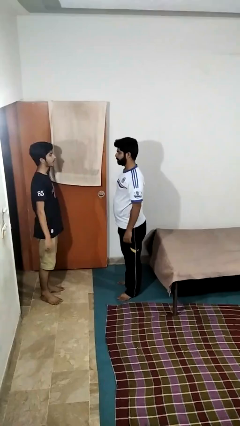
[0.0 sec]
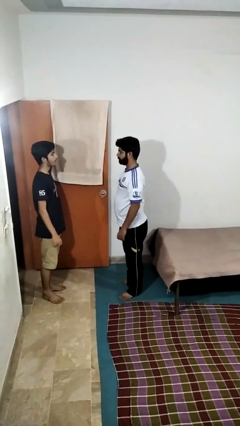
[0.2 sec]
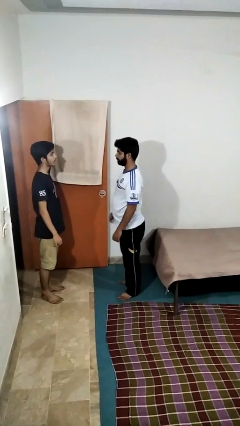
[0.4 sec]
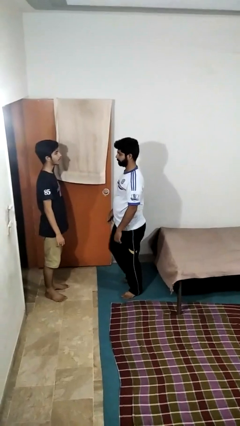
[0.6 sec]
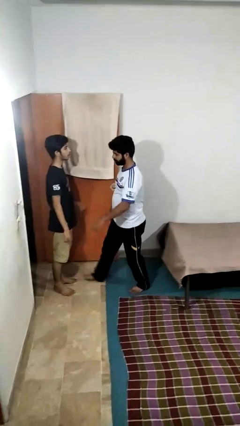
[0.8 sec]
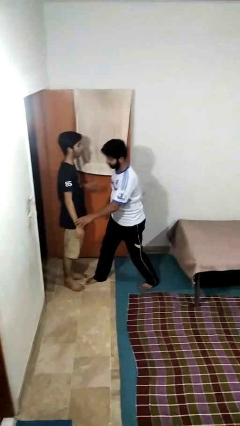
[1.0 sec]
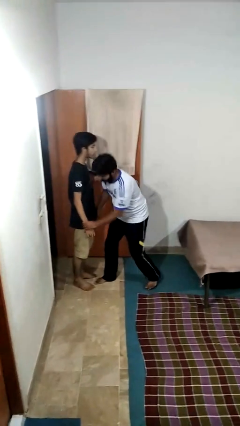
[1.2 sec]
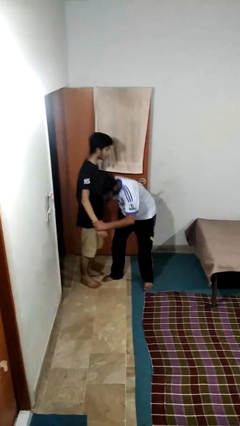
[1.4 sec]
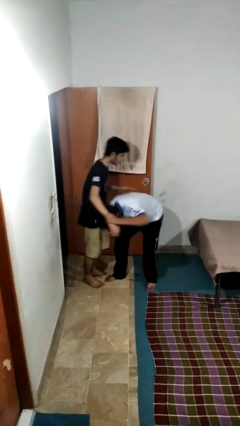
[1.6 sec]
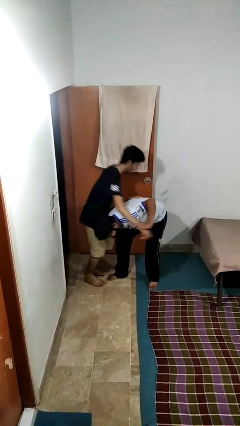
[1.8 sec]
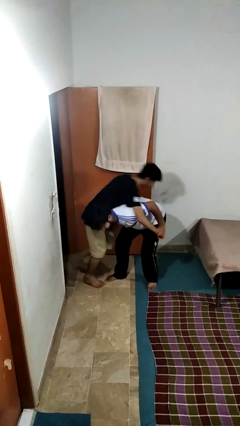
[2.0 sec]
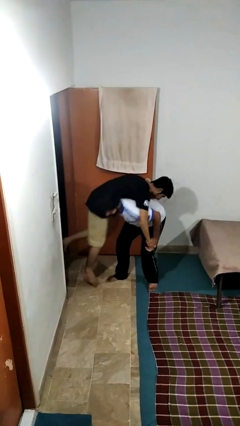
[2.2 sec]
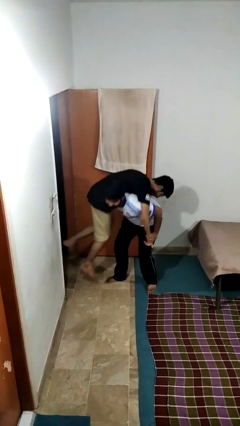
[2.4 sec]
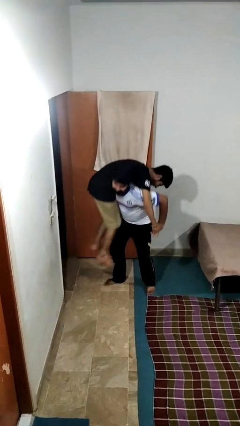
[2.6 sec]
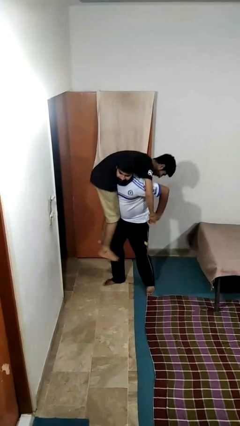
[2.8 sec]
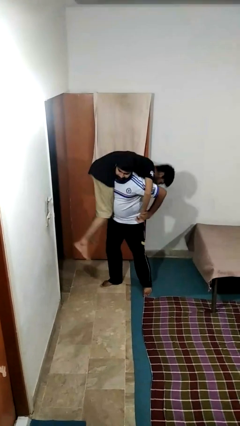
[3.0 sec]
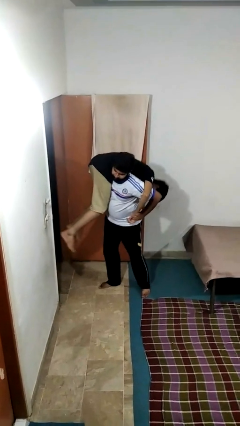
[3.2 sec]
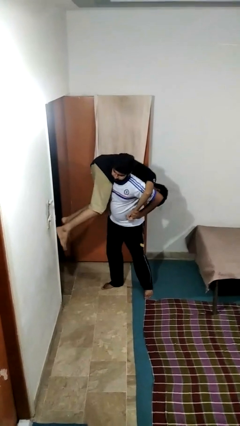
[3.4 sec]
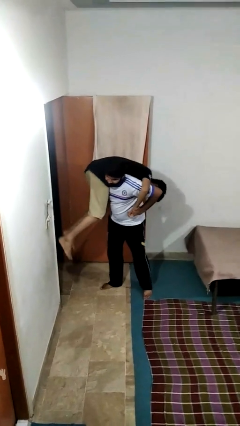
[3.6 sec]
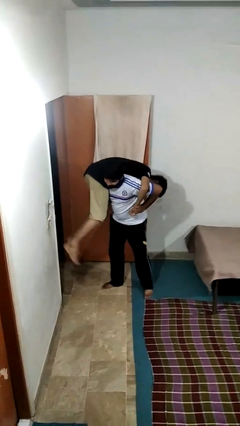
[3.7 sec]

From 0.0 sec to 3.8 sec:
person carries person over shoulder

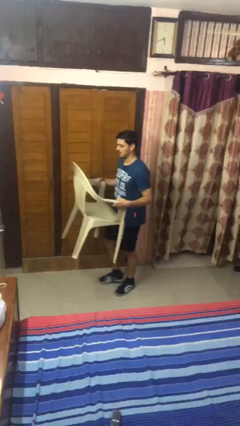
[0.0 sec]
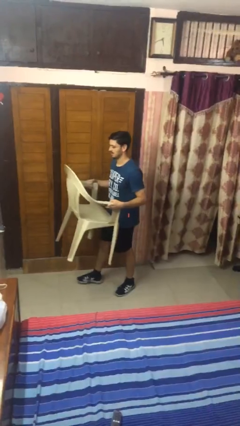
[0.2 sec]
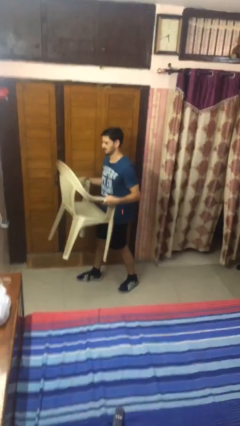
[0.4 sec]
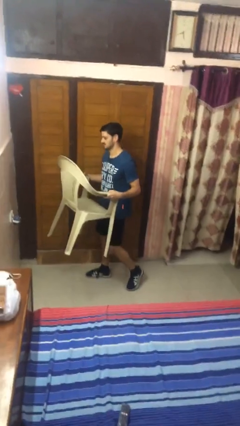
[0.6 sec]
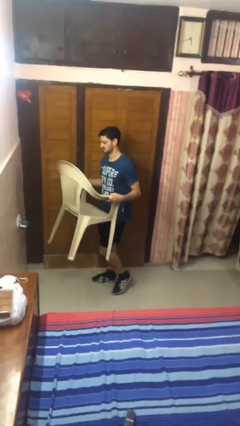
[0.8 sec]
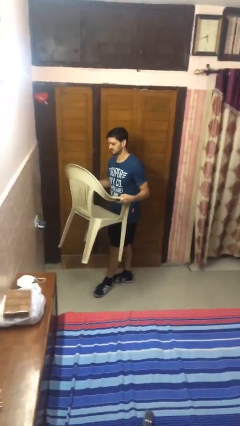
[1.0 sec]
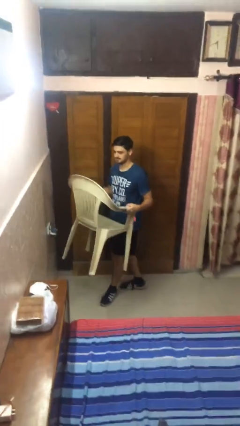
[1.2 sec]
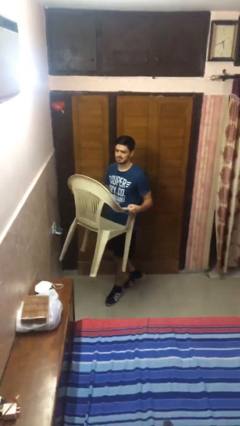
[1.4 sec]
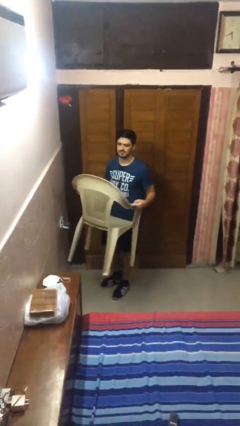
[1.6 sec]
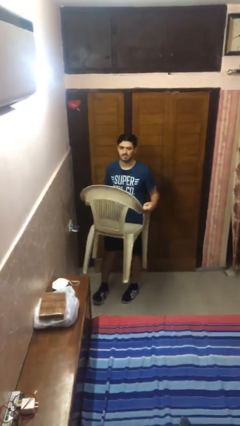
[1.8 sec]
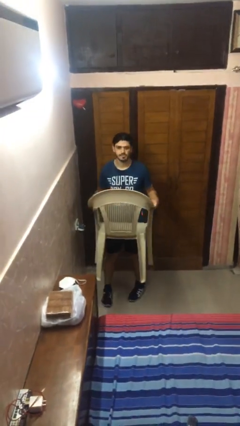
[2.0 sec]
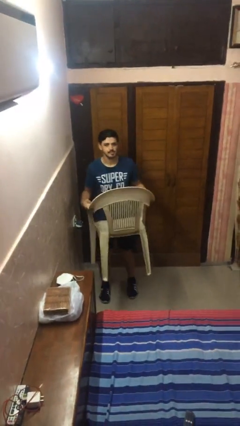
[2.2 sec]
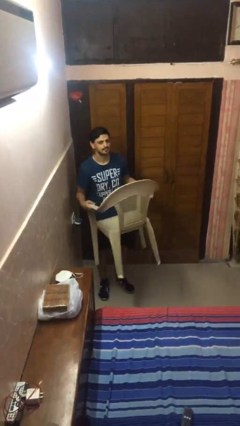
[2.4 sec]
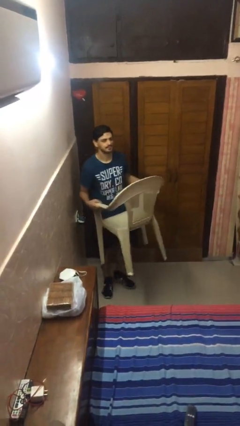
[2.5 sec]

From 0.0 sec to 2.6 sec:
person carries furniture

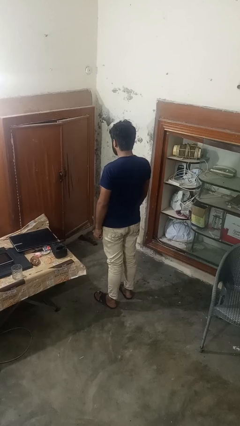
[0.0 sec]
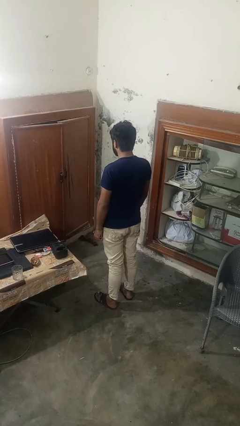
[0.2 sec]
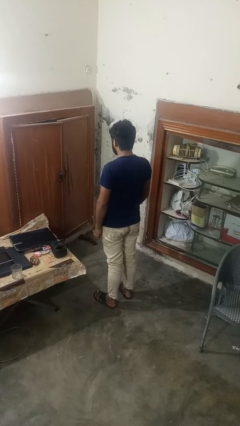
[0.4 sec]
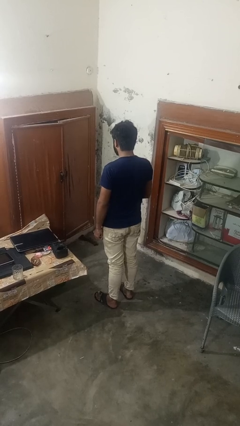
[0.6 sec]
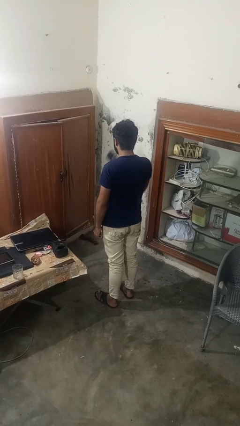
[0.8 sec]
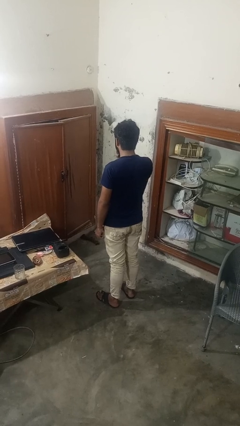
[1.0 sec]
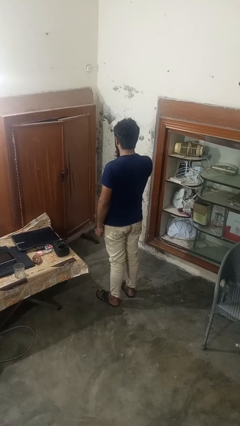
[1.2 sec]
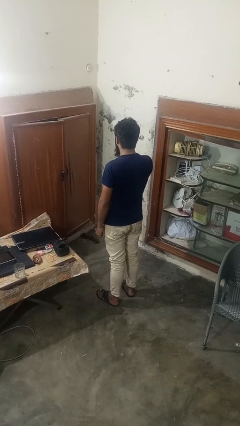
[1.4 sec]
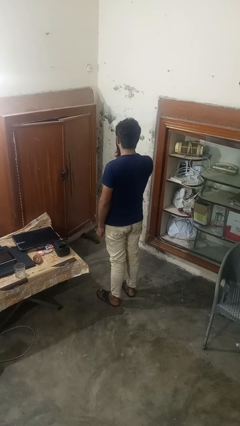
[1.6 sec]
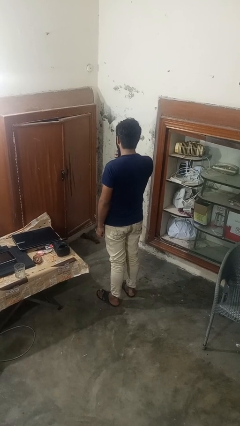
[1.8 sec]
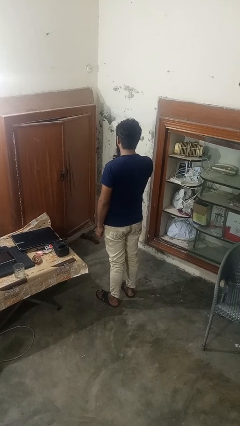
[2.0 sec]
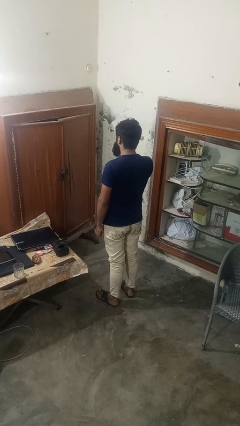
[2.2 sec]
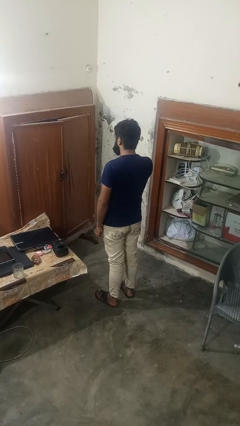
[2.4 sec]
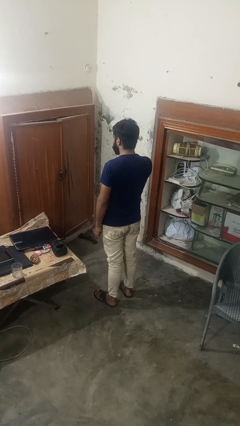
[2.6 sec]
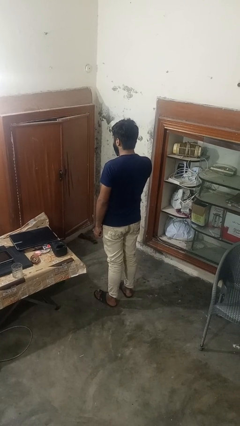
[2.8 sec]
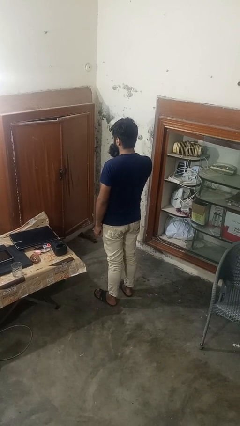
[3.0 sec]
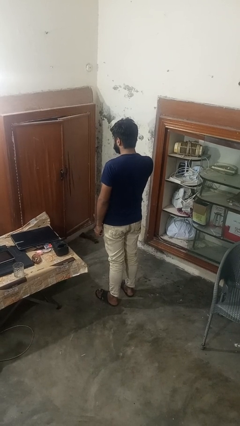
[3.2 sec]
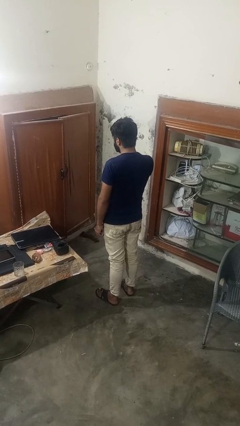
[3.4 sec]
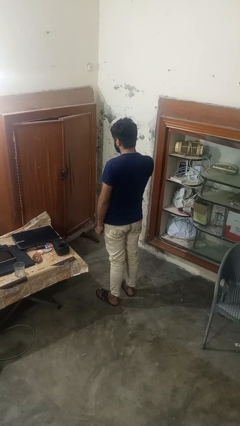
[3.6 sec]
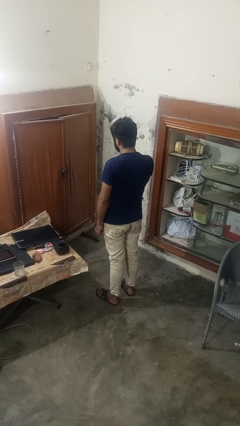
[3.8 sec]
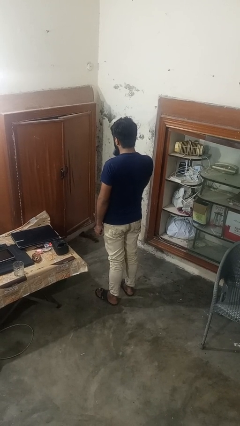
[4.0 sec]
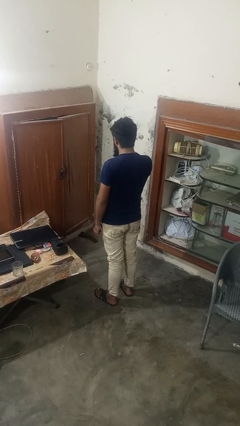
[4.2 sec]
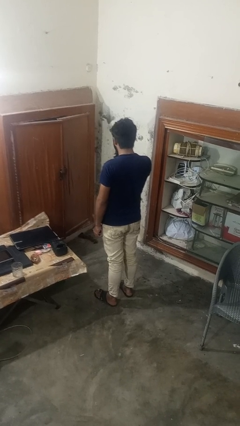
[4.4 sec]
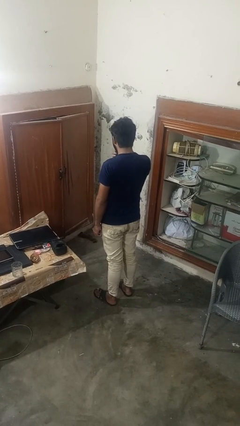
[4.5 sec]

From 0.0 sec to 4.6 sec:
person wipes mouth with napkin

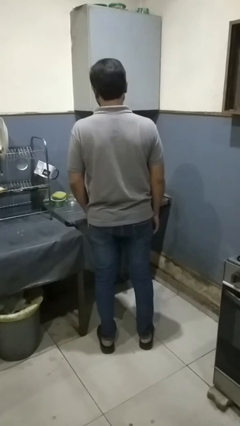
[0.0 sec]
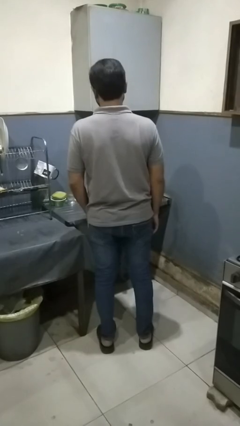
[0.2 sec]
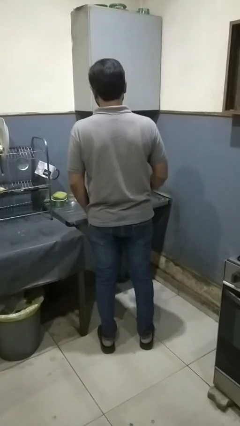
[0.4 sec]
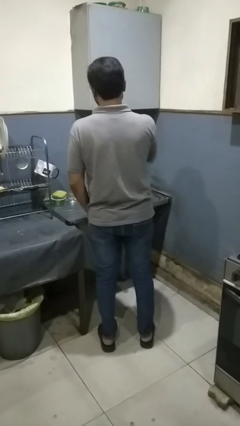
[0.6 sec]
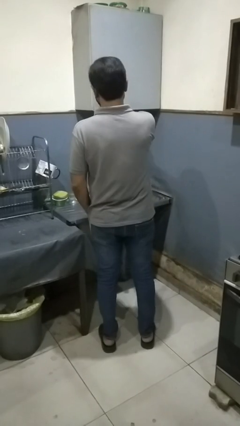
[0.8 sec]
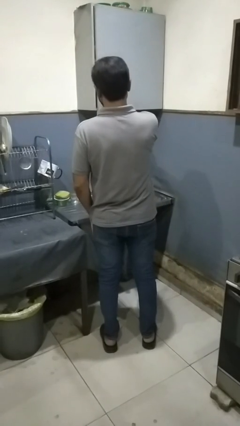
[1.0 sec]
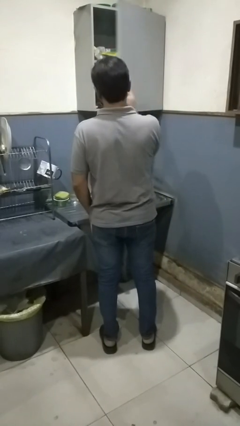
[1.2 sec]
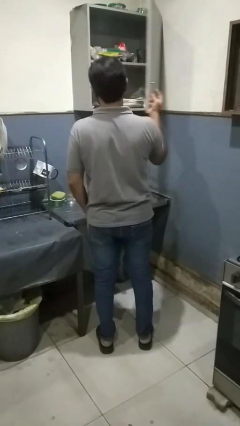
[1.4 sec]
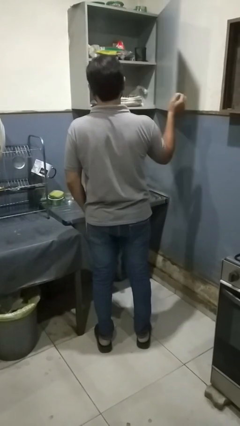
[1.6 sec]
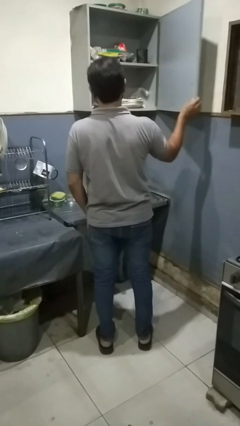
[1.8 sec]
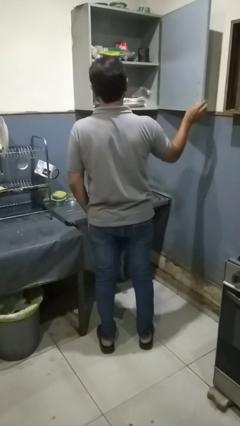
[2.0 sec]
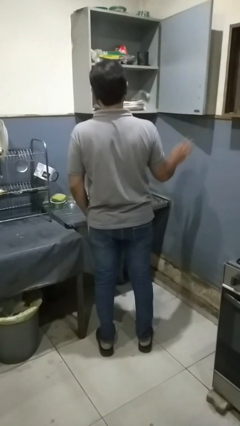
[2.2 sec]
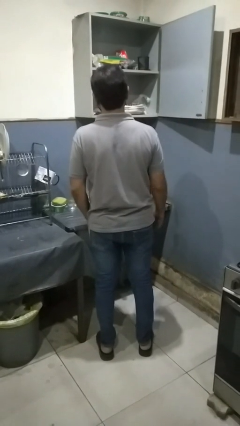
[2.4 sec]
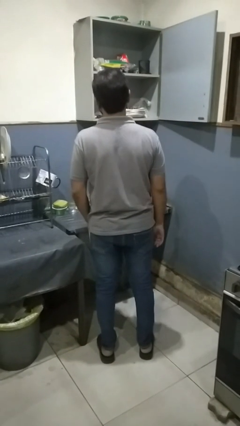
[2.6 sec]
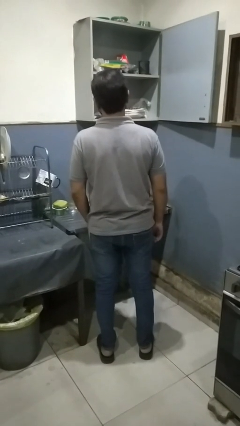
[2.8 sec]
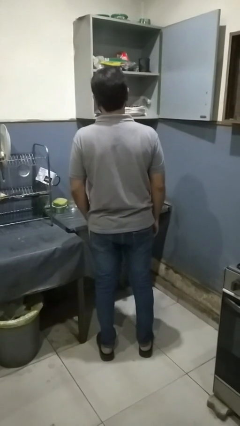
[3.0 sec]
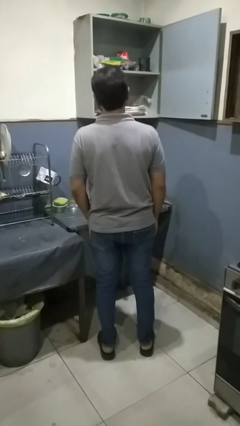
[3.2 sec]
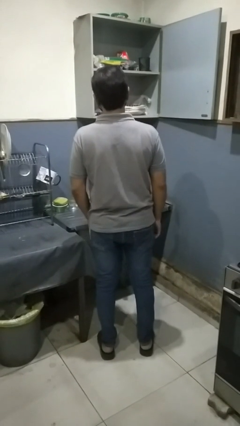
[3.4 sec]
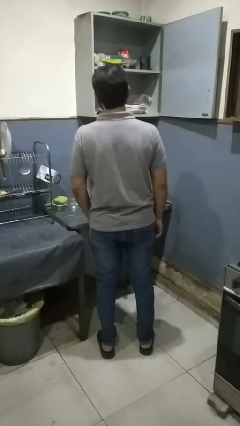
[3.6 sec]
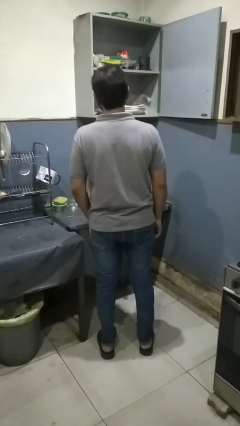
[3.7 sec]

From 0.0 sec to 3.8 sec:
person opens kitchen drawer

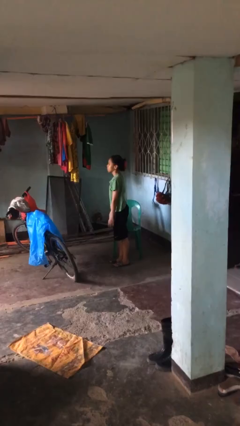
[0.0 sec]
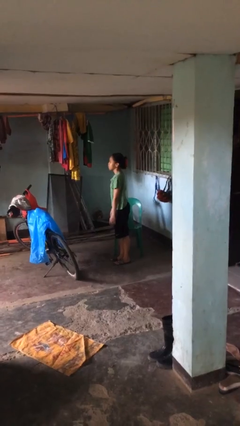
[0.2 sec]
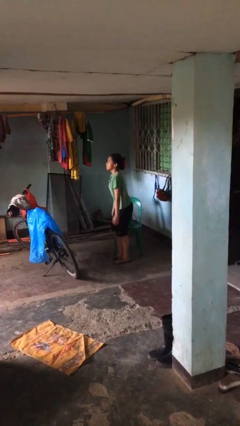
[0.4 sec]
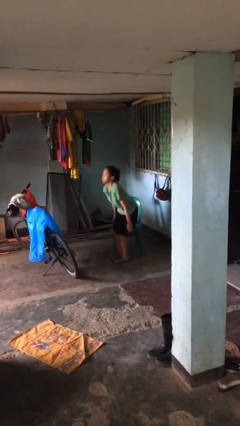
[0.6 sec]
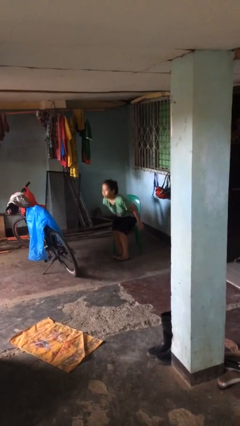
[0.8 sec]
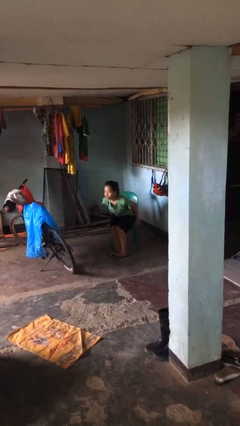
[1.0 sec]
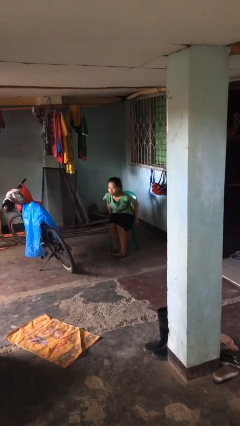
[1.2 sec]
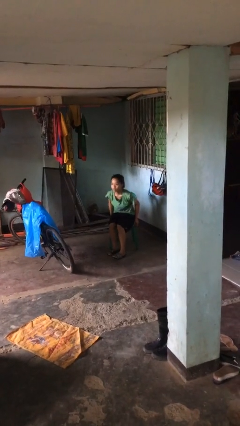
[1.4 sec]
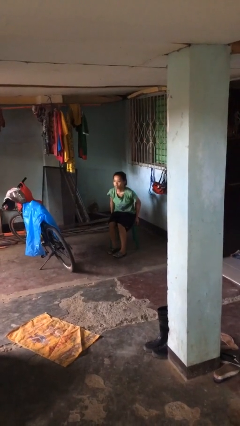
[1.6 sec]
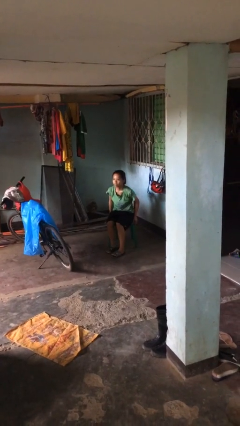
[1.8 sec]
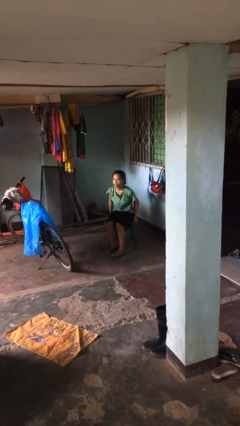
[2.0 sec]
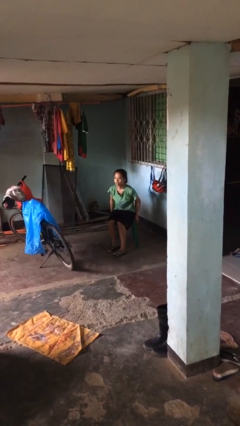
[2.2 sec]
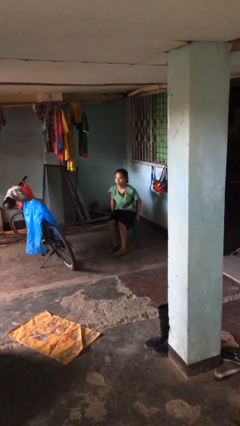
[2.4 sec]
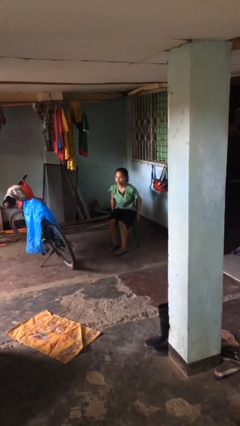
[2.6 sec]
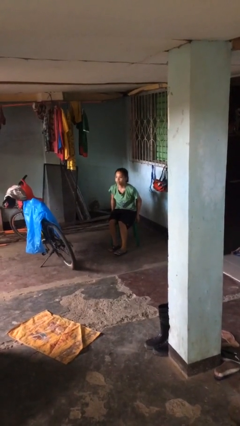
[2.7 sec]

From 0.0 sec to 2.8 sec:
person sits down
